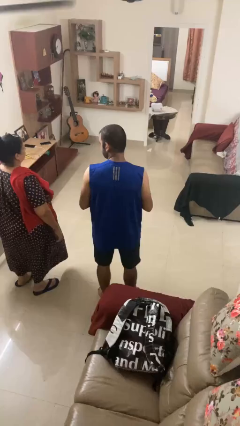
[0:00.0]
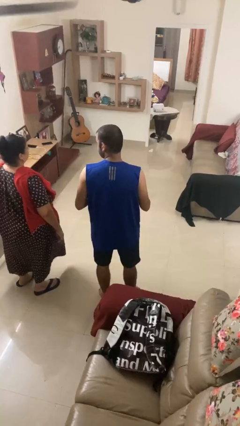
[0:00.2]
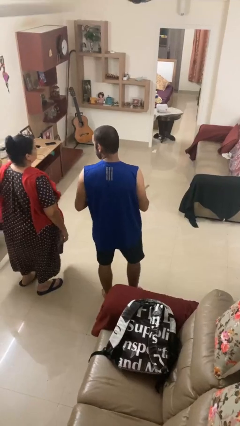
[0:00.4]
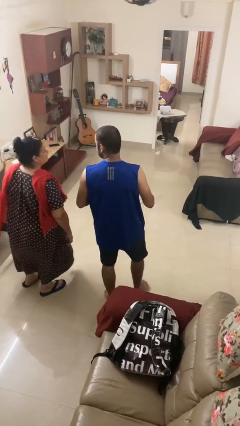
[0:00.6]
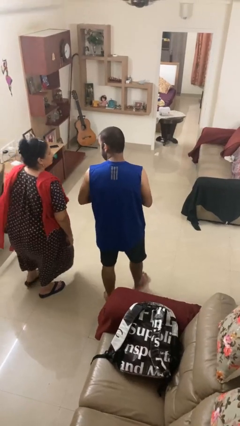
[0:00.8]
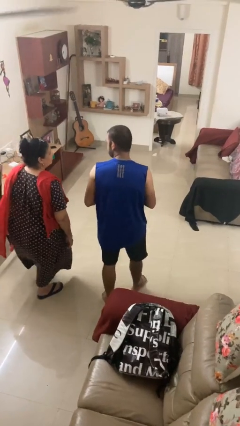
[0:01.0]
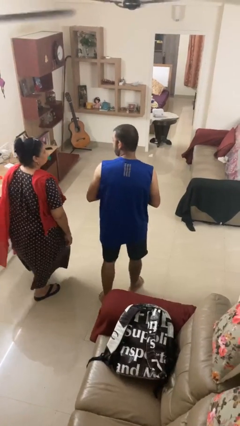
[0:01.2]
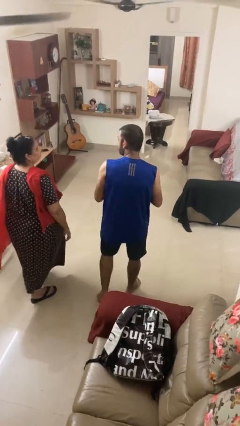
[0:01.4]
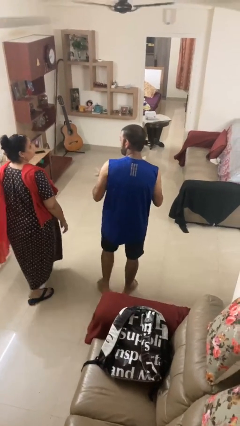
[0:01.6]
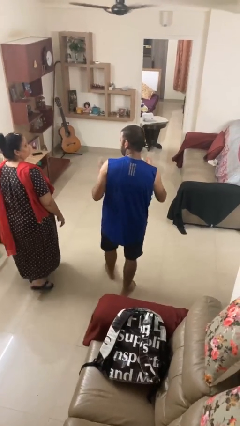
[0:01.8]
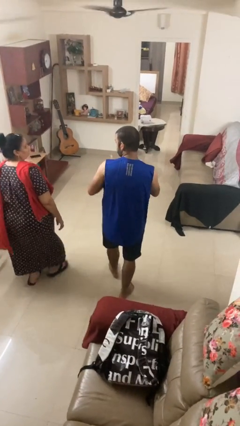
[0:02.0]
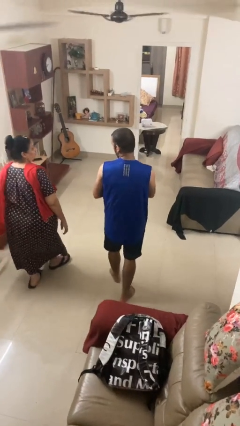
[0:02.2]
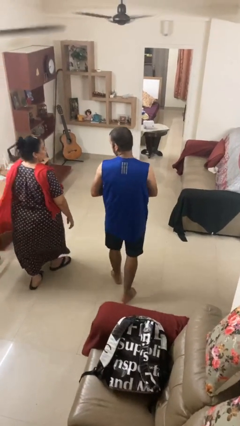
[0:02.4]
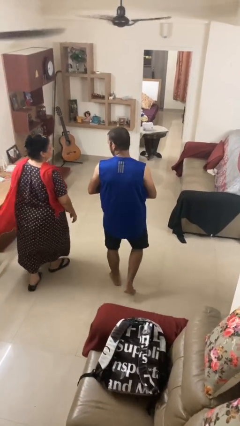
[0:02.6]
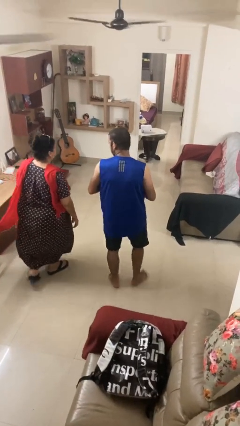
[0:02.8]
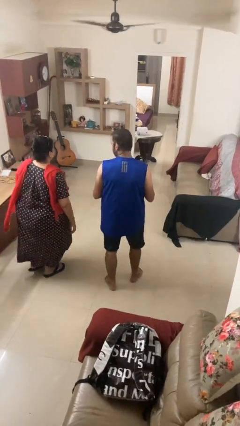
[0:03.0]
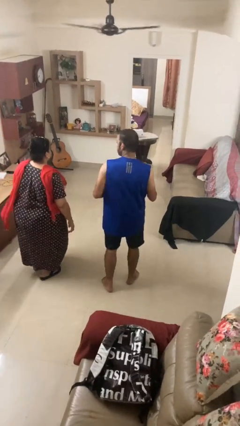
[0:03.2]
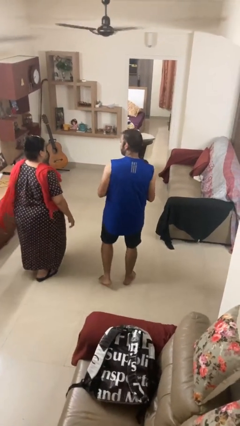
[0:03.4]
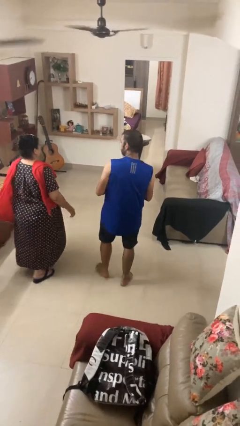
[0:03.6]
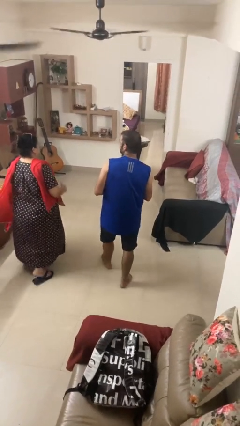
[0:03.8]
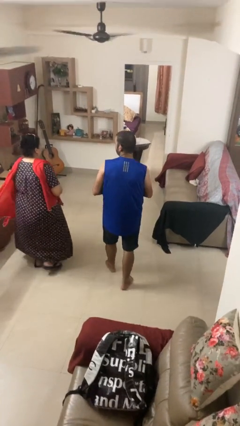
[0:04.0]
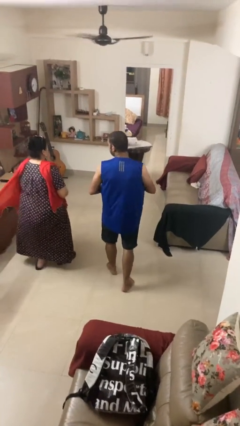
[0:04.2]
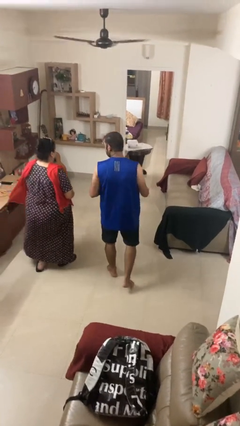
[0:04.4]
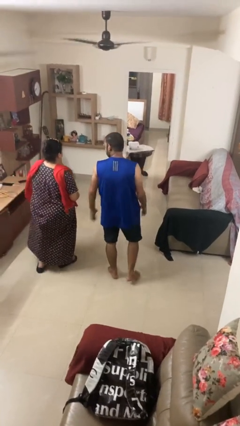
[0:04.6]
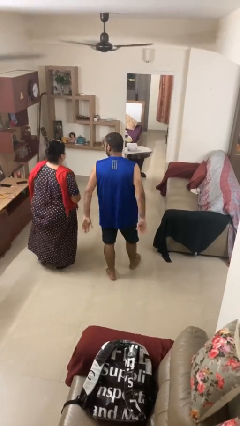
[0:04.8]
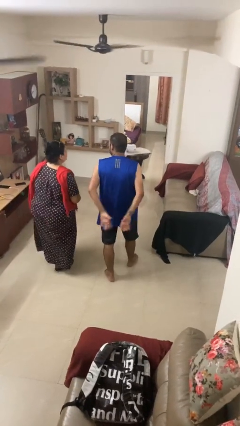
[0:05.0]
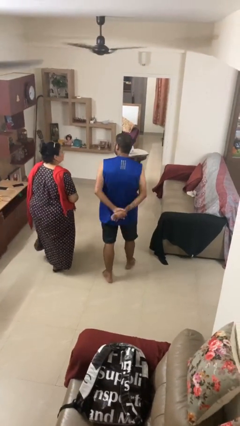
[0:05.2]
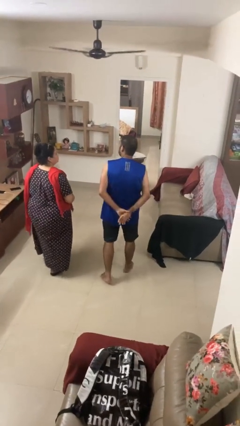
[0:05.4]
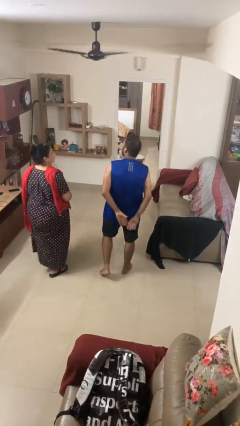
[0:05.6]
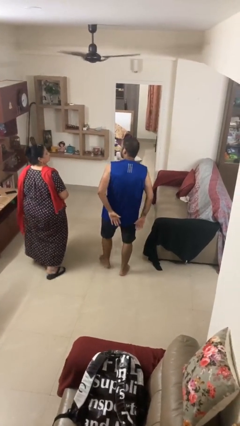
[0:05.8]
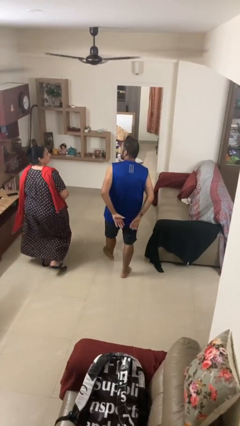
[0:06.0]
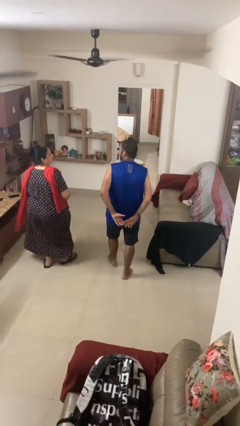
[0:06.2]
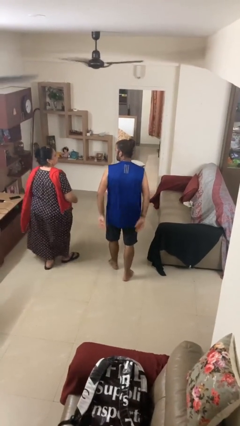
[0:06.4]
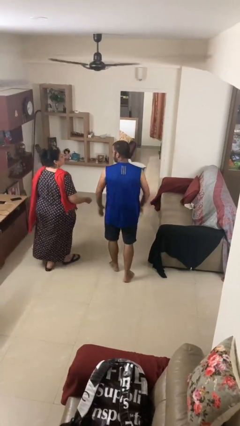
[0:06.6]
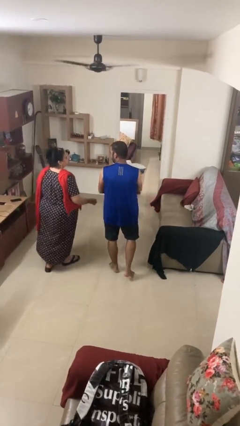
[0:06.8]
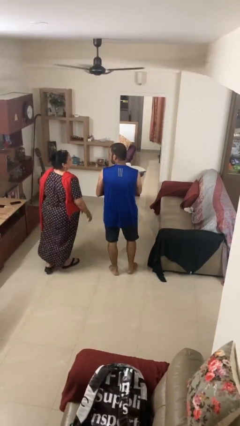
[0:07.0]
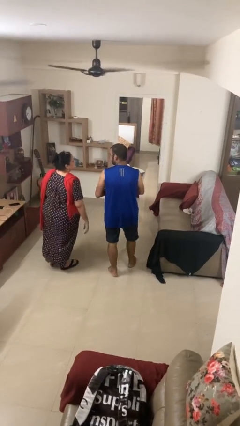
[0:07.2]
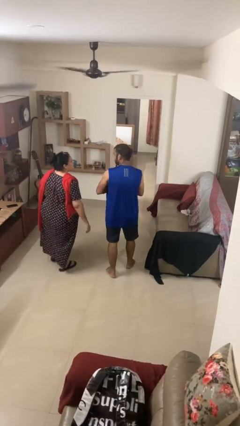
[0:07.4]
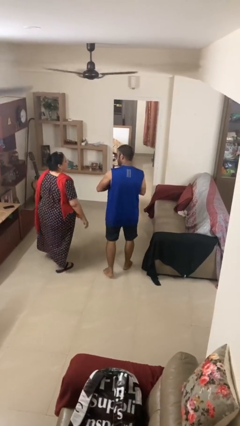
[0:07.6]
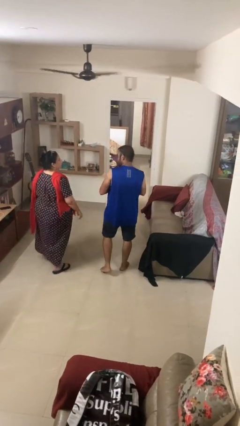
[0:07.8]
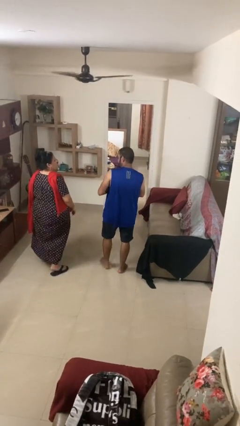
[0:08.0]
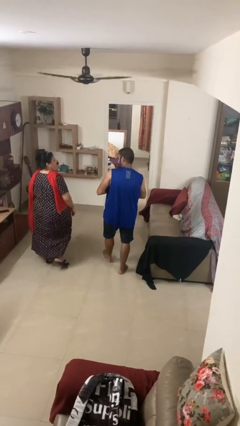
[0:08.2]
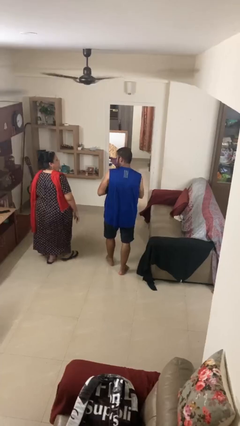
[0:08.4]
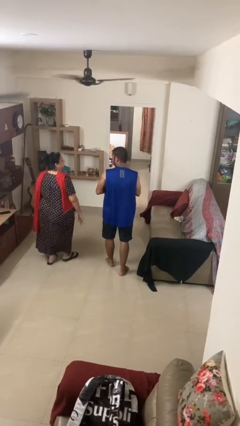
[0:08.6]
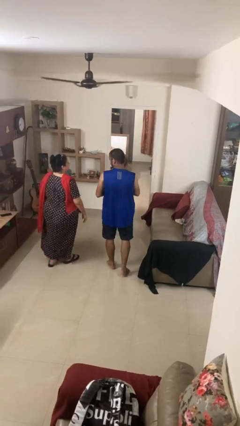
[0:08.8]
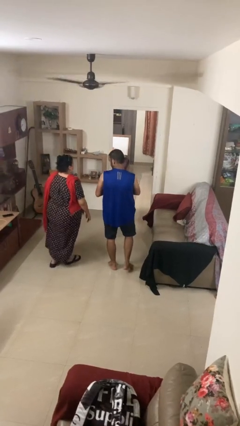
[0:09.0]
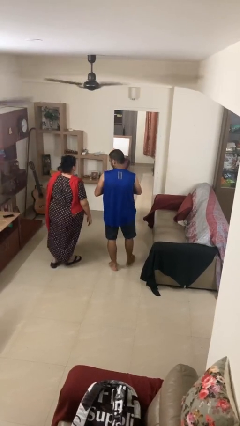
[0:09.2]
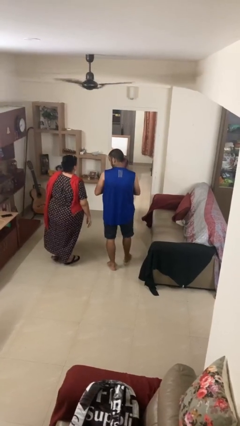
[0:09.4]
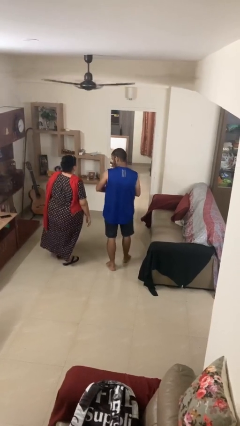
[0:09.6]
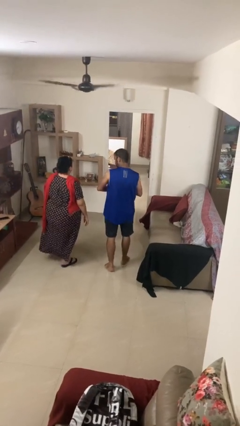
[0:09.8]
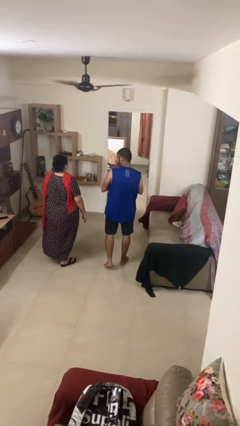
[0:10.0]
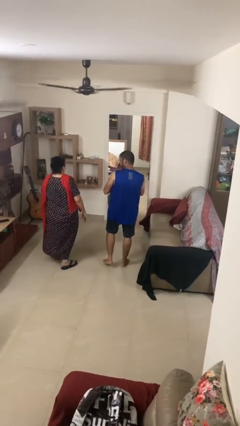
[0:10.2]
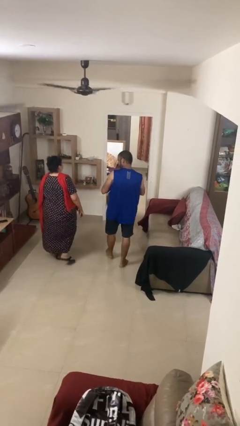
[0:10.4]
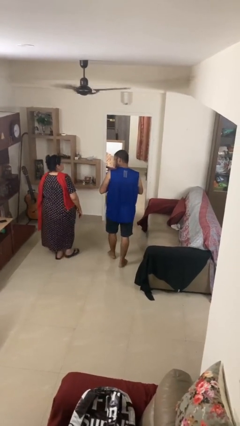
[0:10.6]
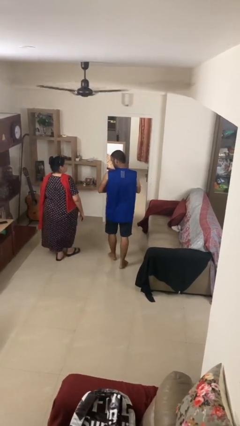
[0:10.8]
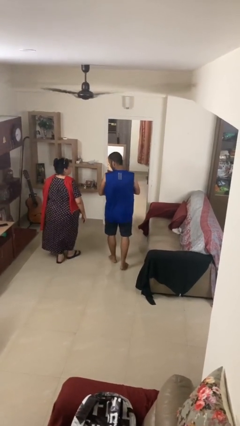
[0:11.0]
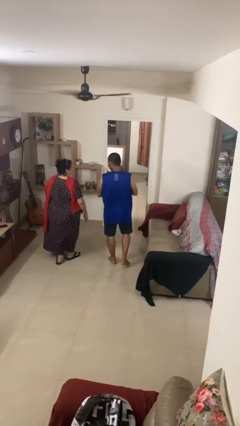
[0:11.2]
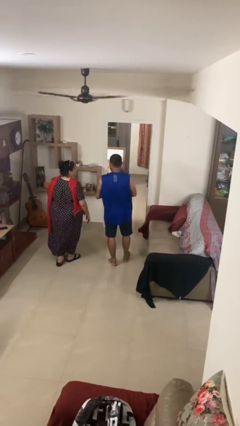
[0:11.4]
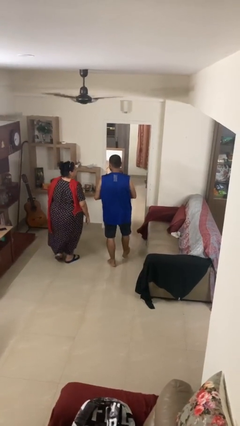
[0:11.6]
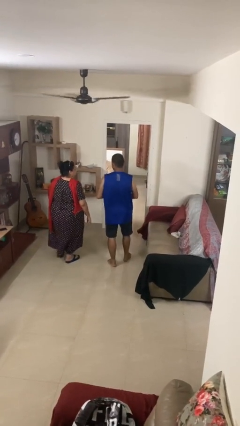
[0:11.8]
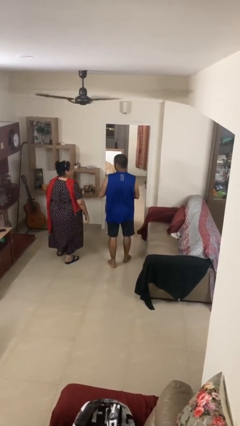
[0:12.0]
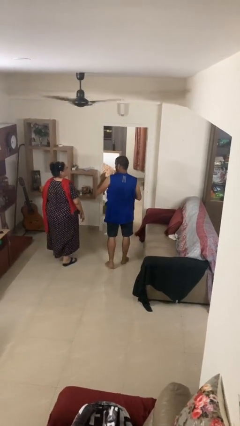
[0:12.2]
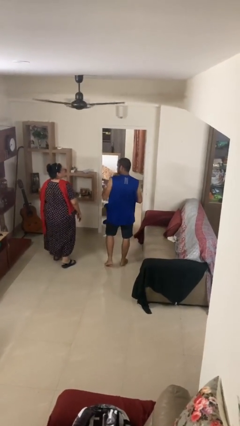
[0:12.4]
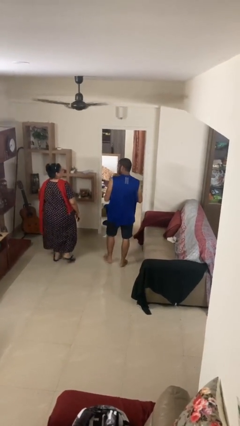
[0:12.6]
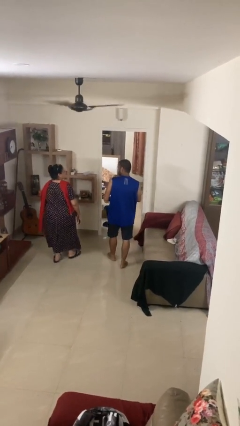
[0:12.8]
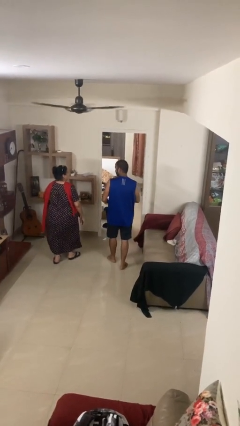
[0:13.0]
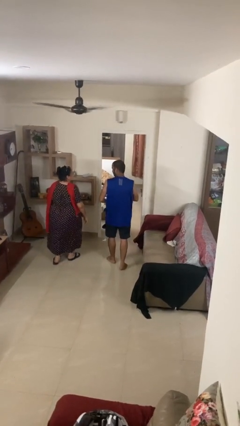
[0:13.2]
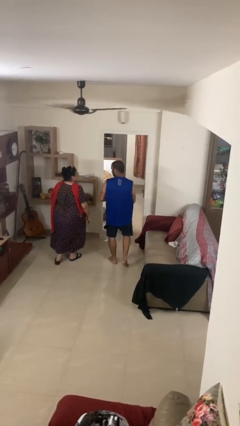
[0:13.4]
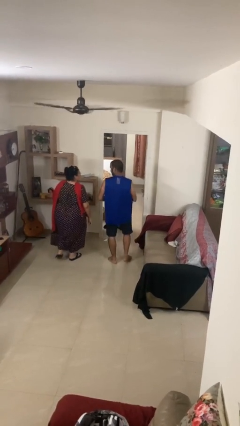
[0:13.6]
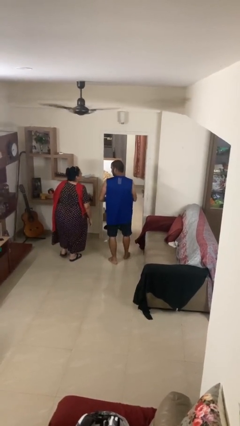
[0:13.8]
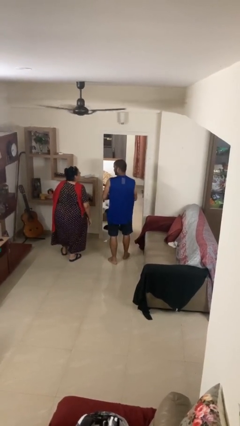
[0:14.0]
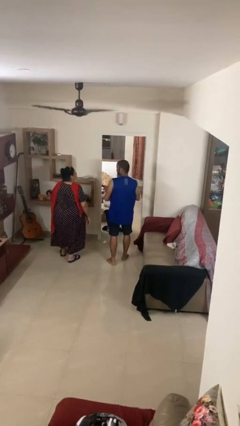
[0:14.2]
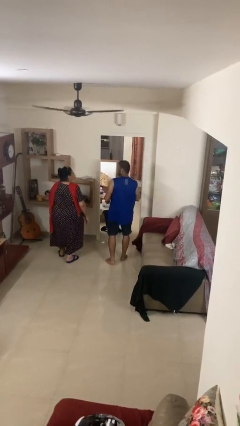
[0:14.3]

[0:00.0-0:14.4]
person talks to person

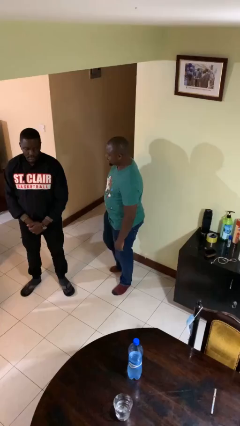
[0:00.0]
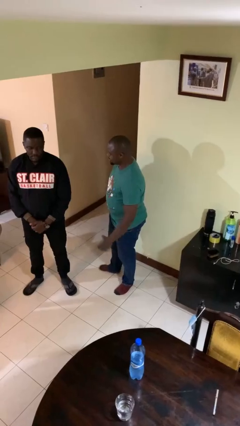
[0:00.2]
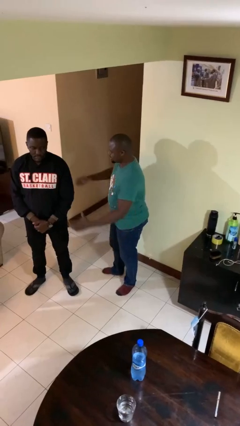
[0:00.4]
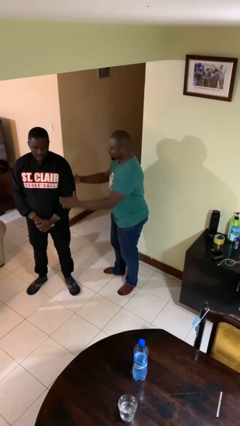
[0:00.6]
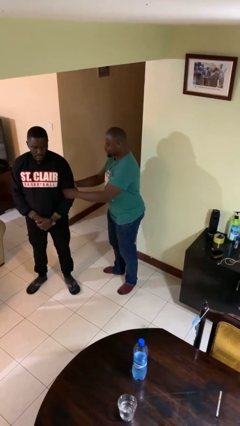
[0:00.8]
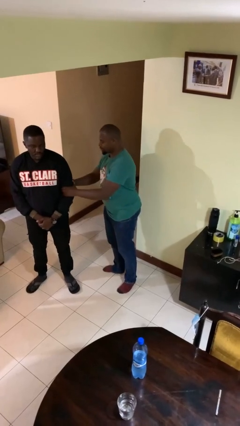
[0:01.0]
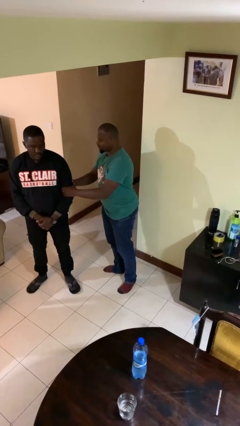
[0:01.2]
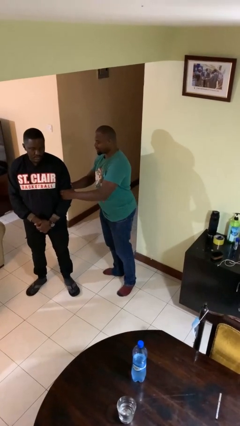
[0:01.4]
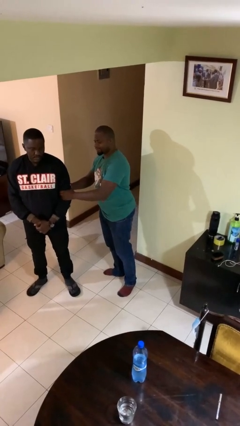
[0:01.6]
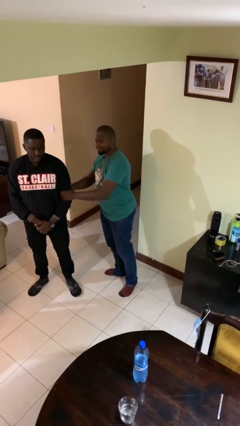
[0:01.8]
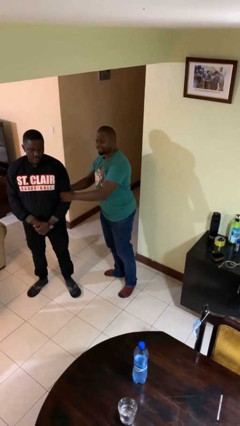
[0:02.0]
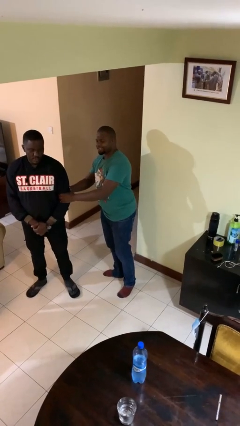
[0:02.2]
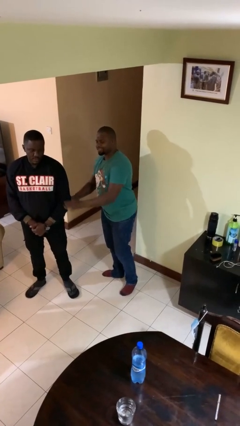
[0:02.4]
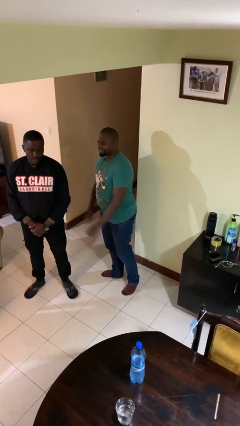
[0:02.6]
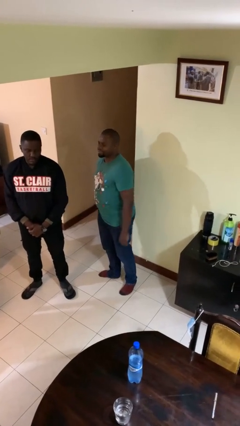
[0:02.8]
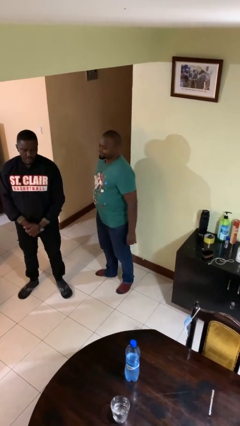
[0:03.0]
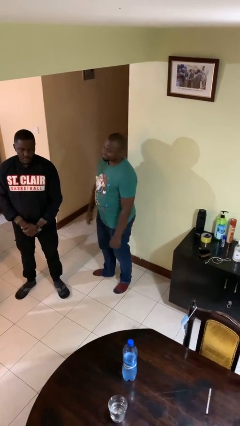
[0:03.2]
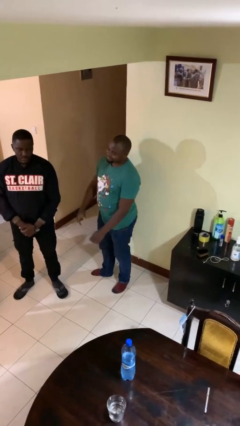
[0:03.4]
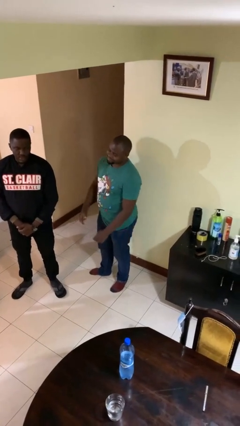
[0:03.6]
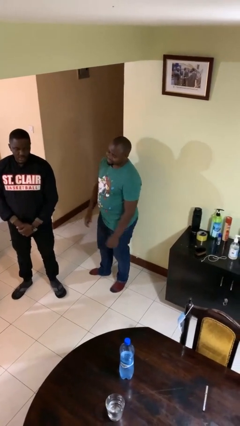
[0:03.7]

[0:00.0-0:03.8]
person grabs person by bicep
